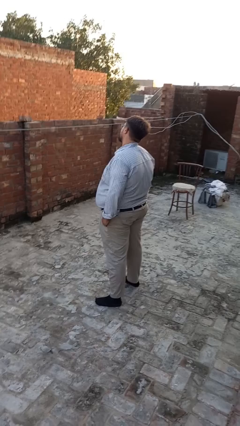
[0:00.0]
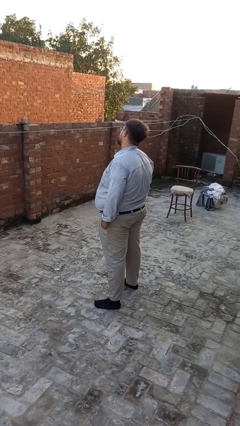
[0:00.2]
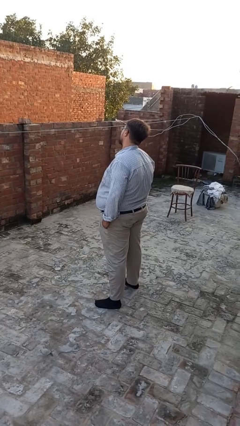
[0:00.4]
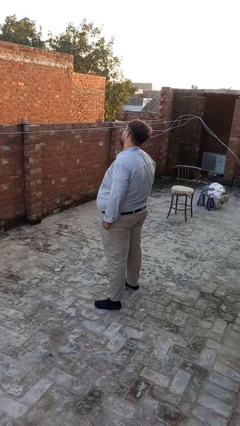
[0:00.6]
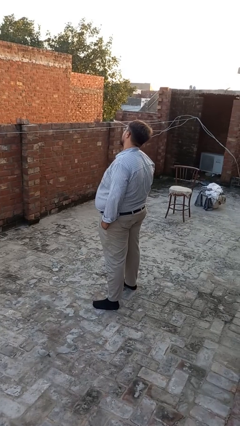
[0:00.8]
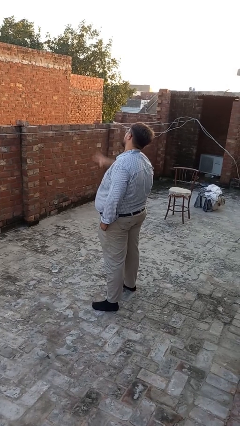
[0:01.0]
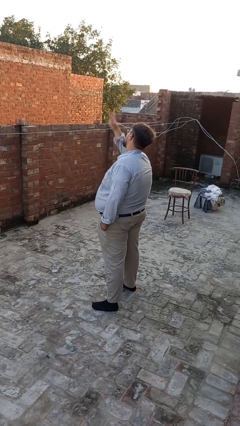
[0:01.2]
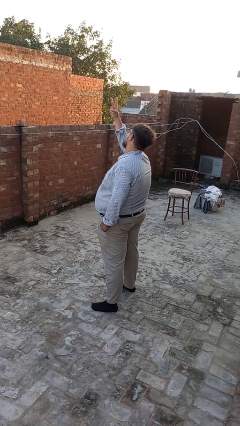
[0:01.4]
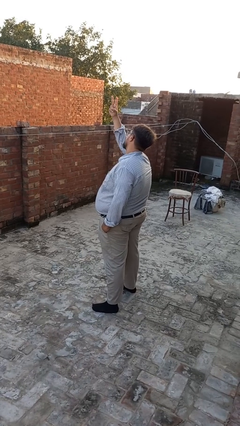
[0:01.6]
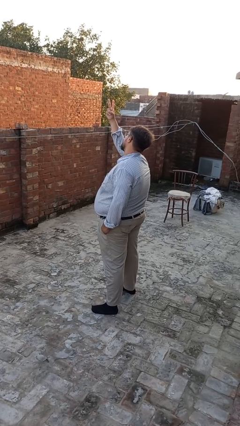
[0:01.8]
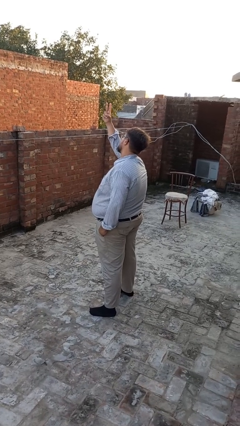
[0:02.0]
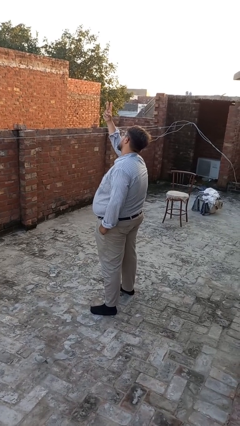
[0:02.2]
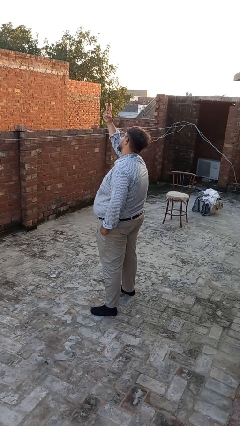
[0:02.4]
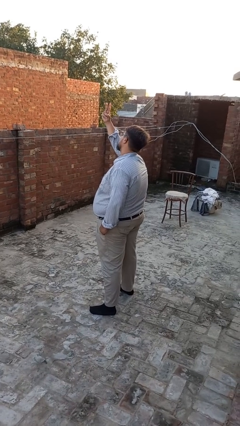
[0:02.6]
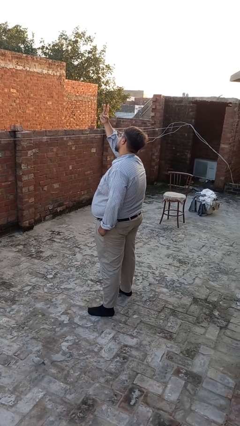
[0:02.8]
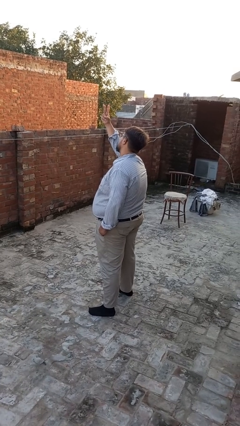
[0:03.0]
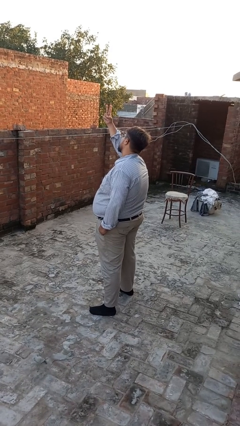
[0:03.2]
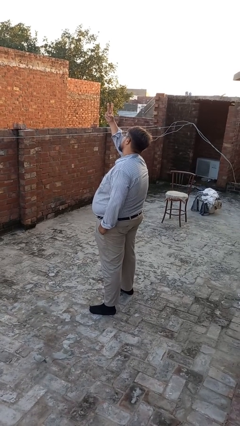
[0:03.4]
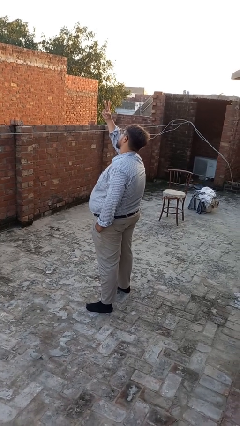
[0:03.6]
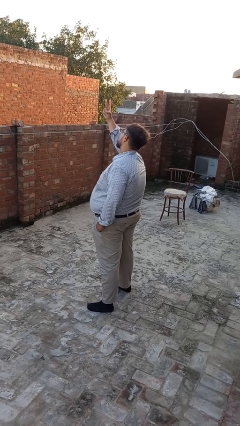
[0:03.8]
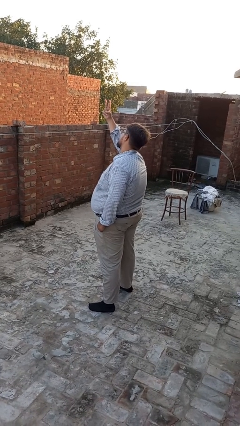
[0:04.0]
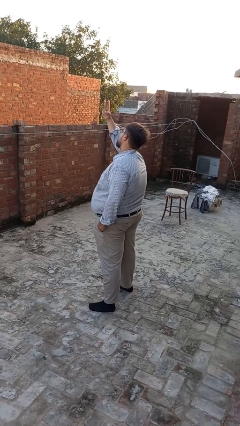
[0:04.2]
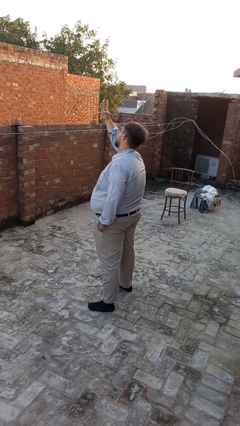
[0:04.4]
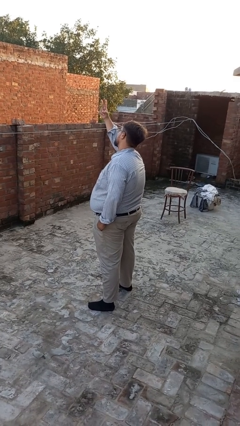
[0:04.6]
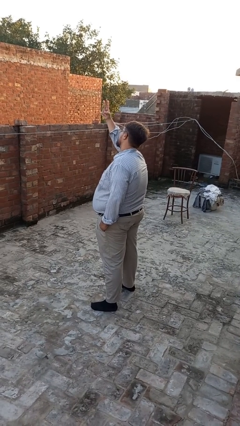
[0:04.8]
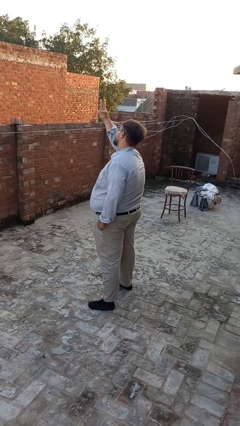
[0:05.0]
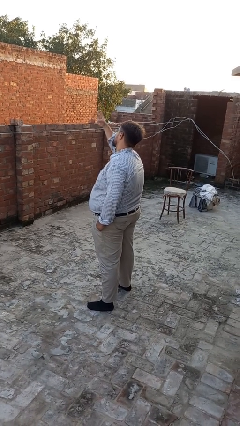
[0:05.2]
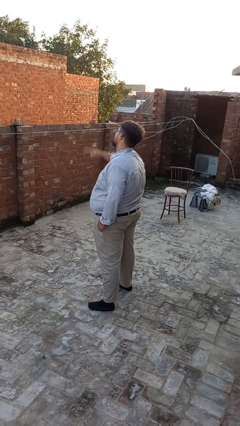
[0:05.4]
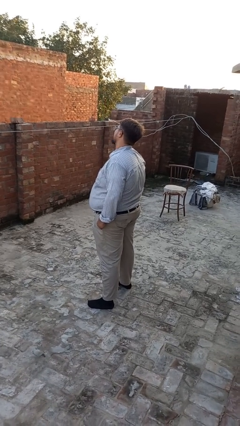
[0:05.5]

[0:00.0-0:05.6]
person gestures peace

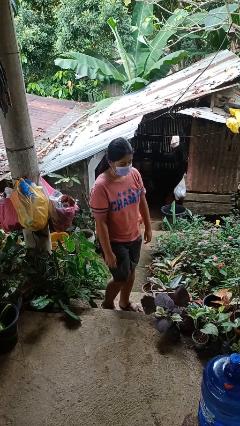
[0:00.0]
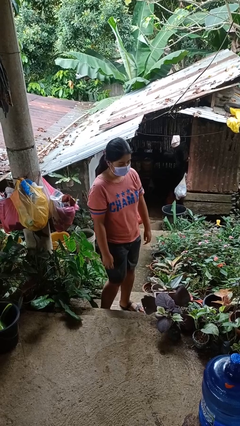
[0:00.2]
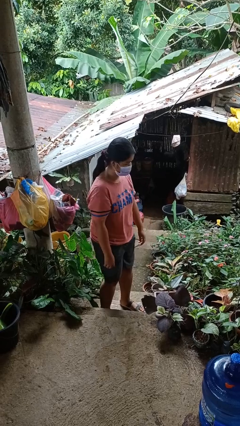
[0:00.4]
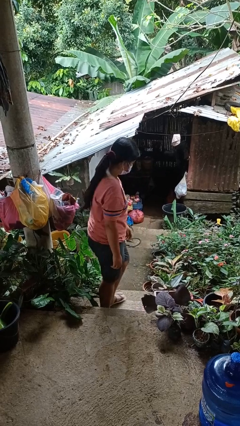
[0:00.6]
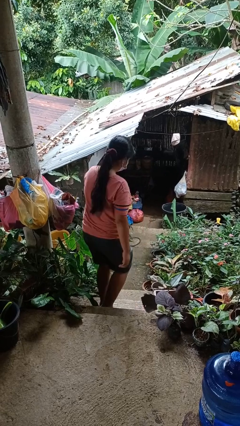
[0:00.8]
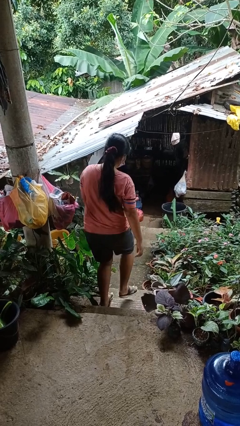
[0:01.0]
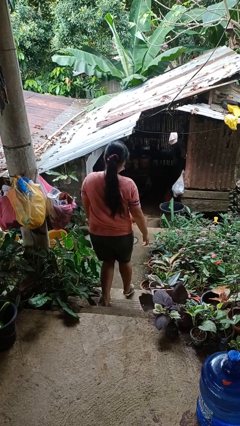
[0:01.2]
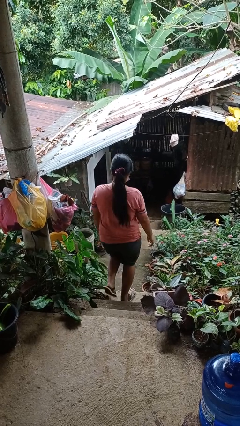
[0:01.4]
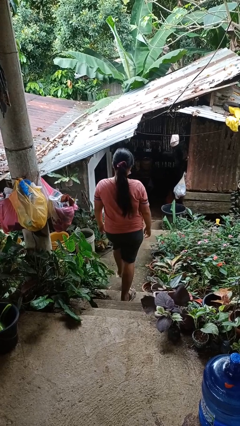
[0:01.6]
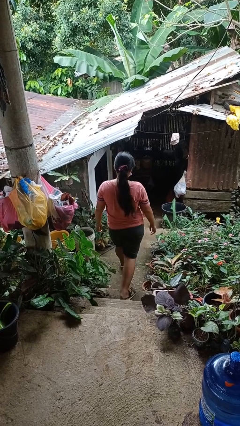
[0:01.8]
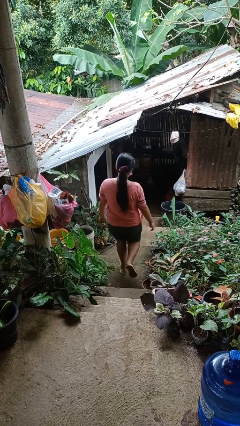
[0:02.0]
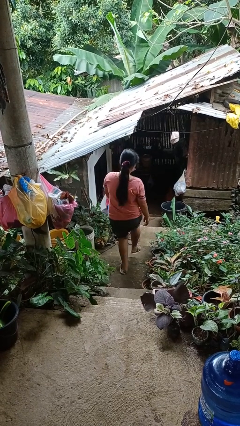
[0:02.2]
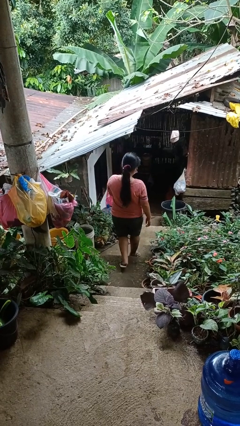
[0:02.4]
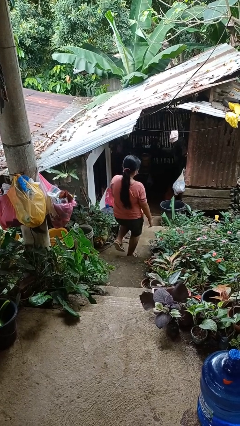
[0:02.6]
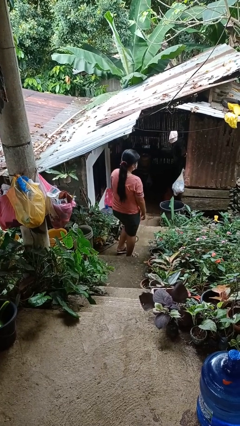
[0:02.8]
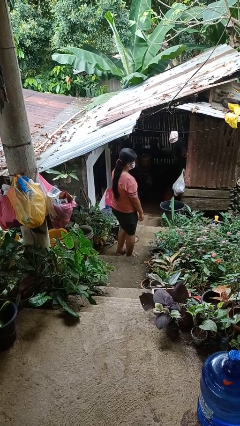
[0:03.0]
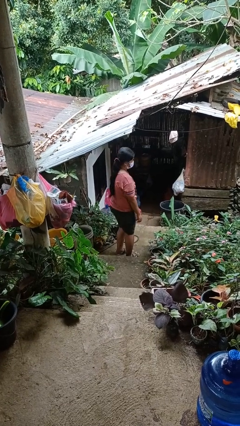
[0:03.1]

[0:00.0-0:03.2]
person climbs down stairs

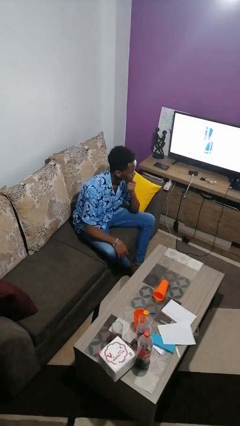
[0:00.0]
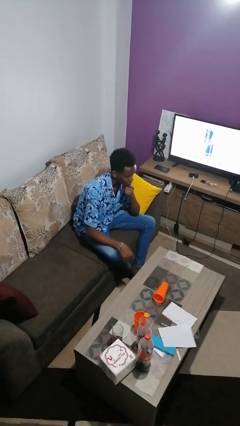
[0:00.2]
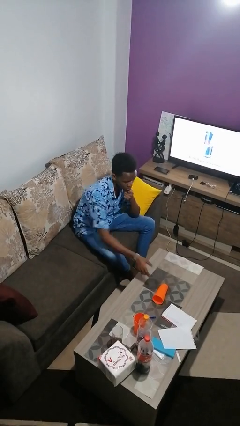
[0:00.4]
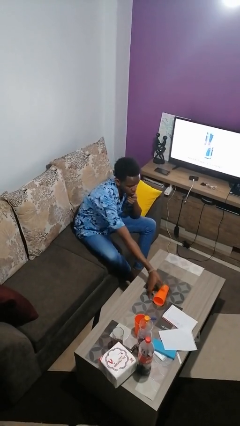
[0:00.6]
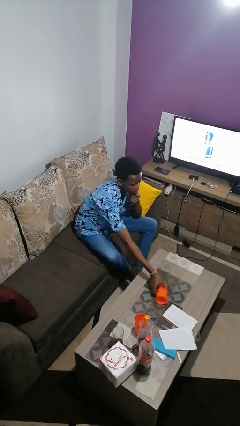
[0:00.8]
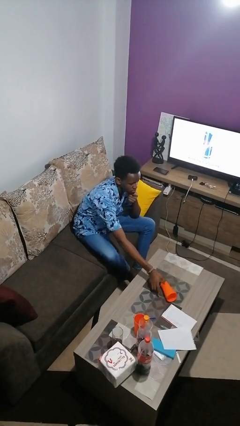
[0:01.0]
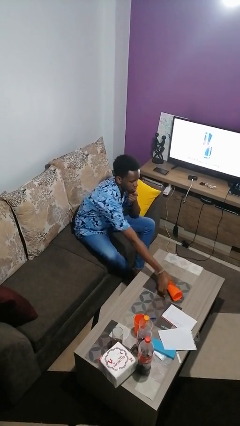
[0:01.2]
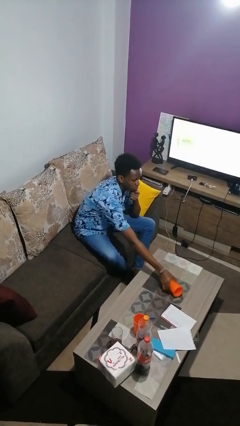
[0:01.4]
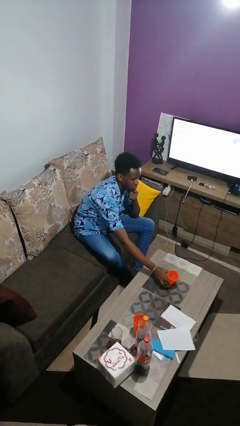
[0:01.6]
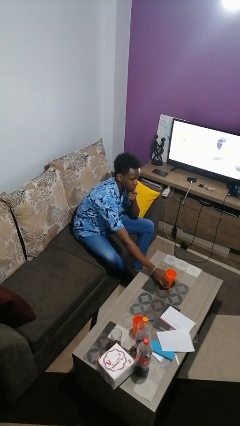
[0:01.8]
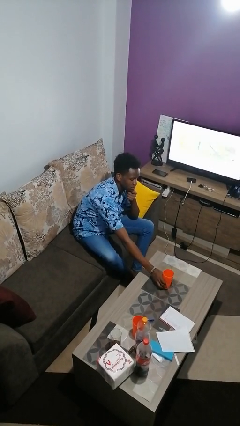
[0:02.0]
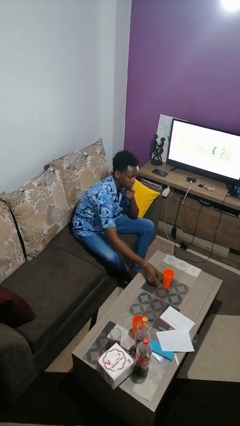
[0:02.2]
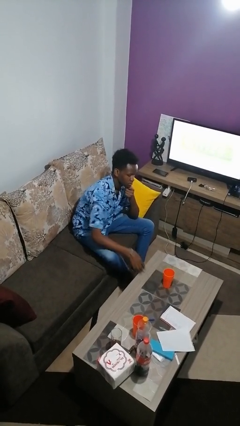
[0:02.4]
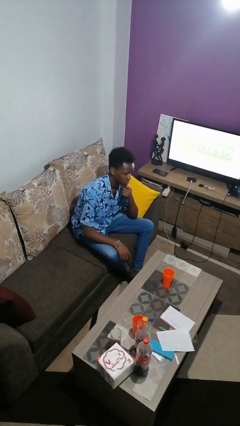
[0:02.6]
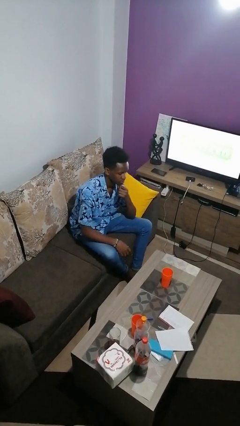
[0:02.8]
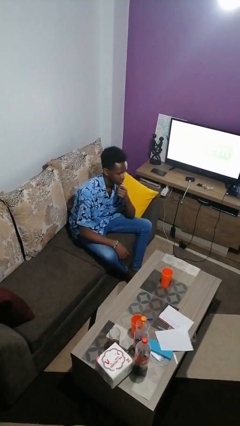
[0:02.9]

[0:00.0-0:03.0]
person sets upright glass

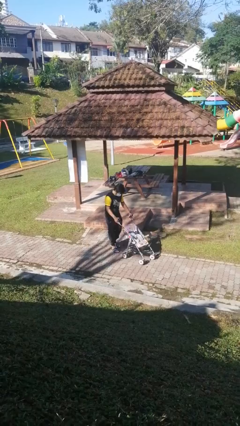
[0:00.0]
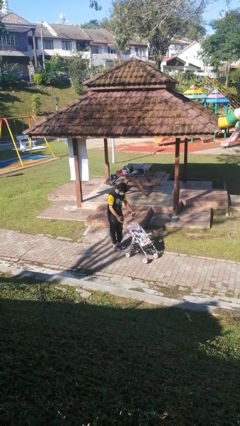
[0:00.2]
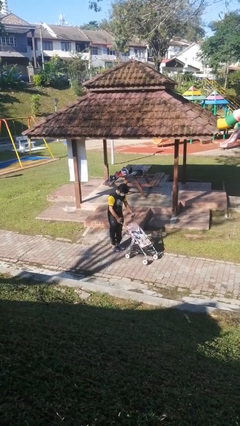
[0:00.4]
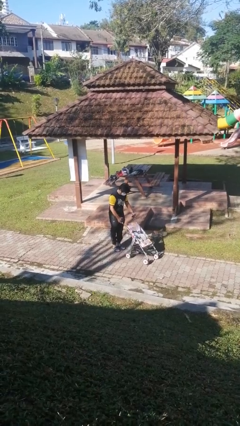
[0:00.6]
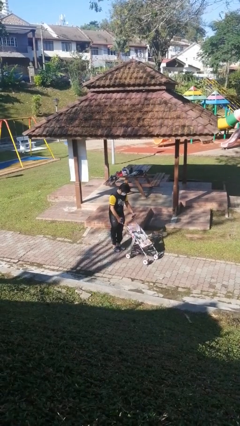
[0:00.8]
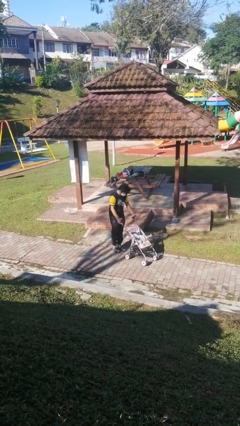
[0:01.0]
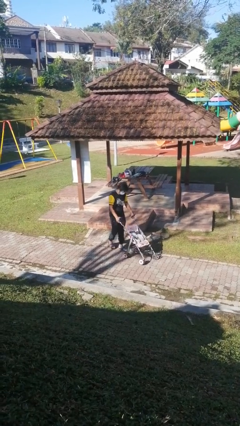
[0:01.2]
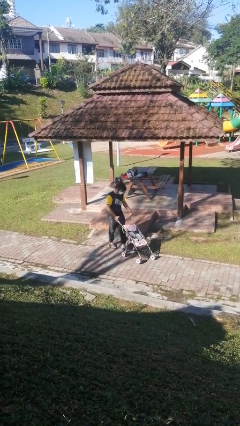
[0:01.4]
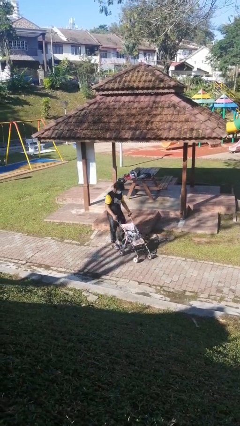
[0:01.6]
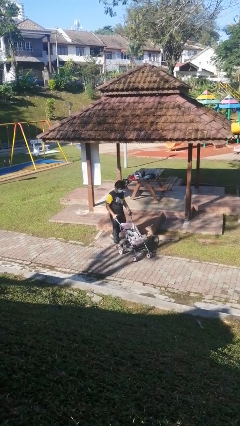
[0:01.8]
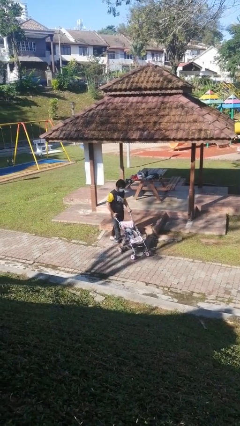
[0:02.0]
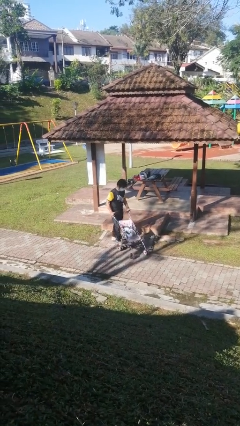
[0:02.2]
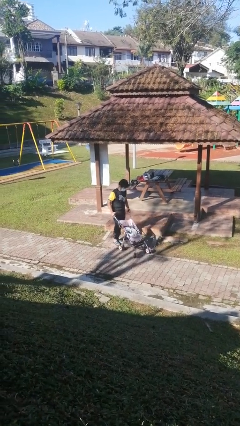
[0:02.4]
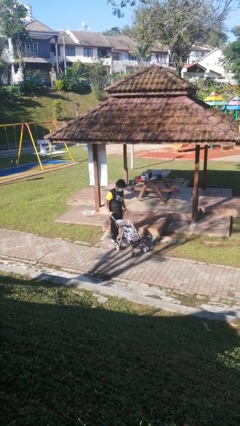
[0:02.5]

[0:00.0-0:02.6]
person pulls wheeled cart

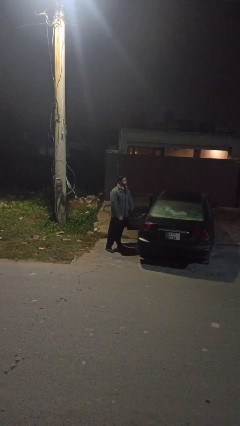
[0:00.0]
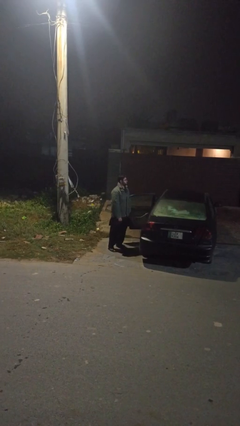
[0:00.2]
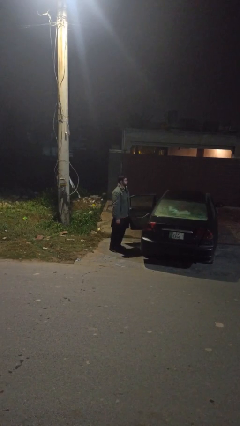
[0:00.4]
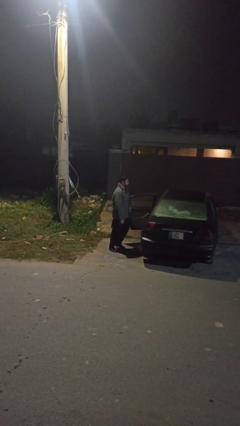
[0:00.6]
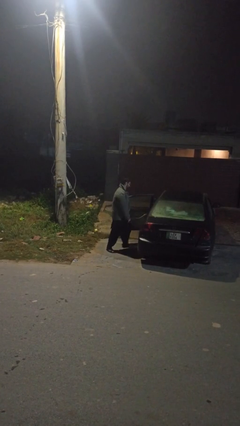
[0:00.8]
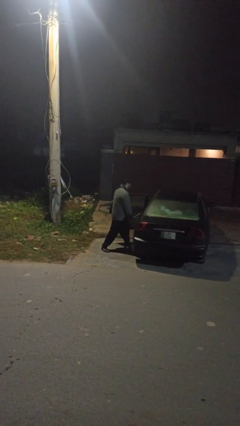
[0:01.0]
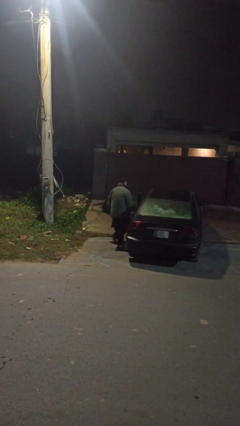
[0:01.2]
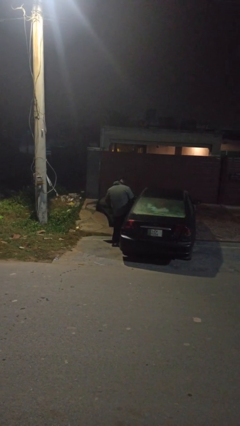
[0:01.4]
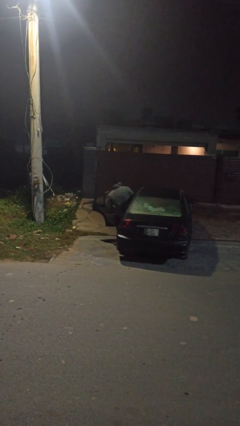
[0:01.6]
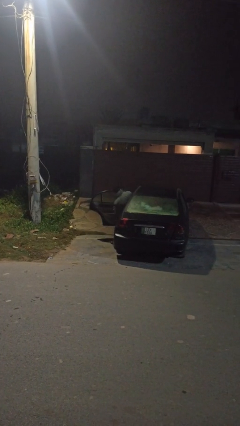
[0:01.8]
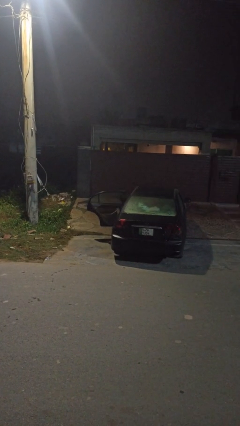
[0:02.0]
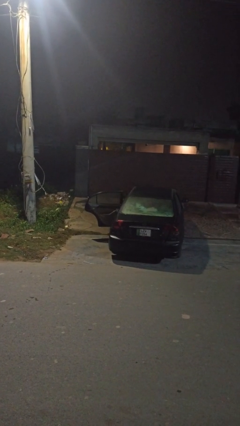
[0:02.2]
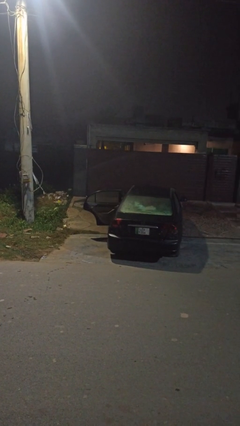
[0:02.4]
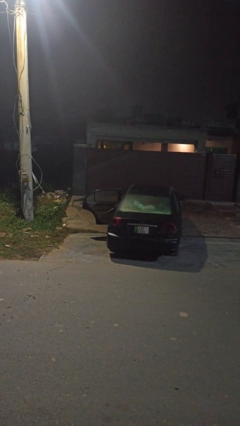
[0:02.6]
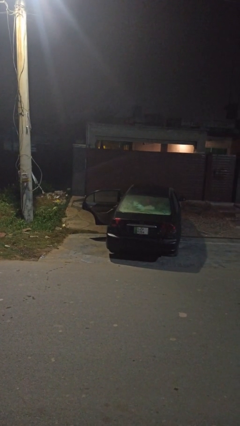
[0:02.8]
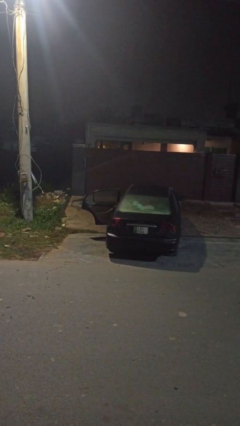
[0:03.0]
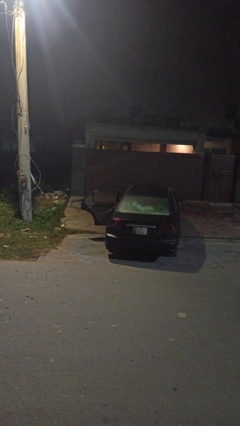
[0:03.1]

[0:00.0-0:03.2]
person enters car
